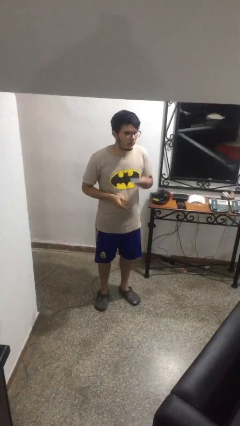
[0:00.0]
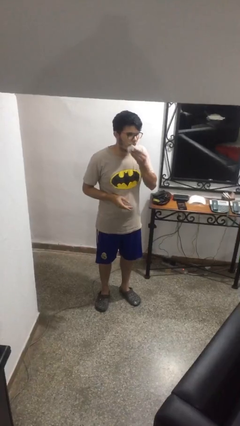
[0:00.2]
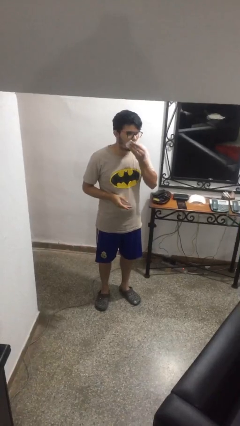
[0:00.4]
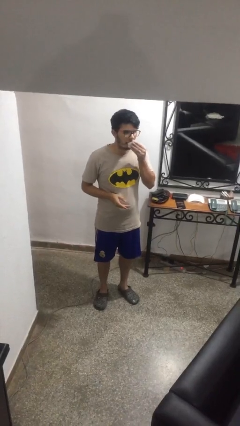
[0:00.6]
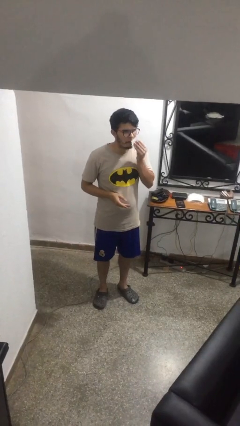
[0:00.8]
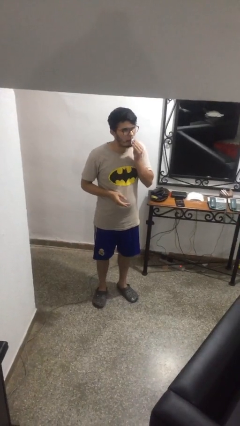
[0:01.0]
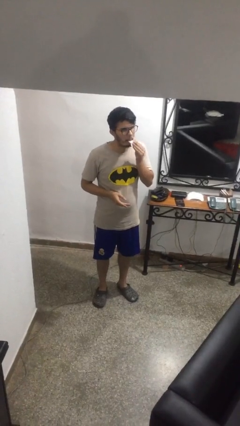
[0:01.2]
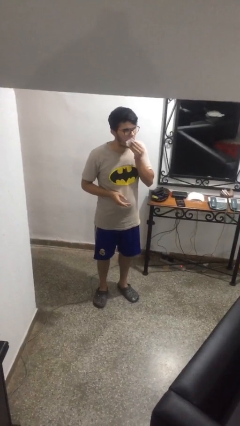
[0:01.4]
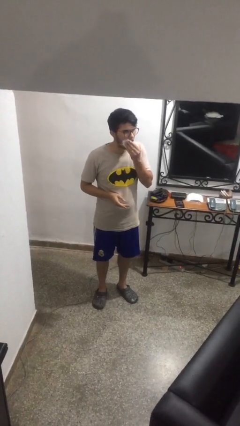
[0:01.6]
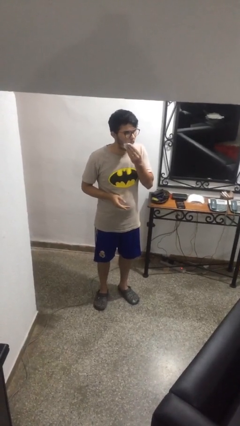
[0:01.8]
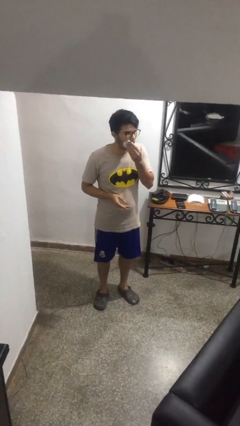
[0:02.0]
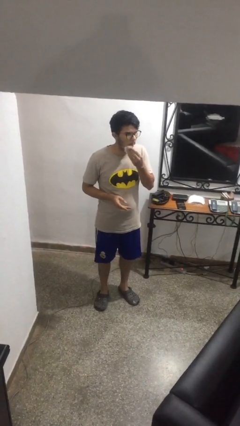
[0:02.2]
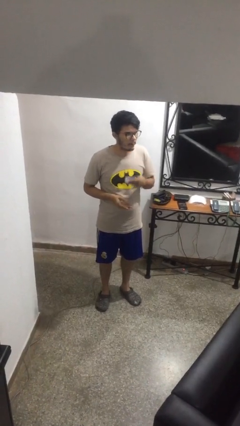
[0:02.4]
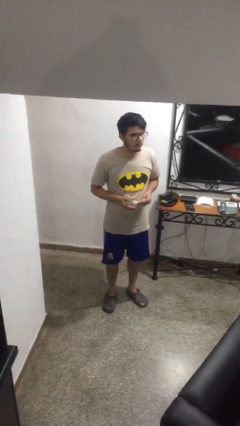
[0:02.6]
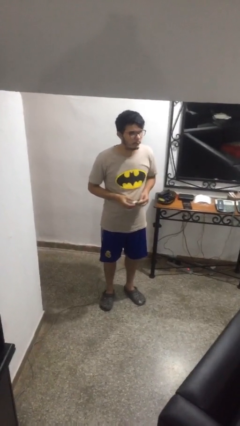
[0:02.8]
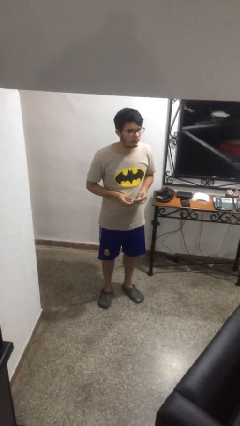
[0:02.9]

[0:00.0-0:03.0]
person wipes mouth with napkin

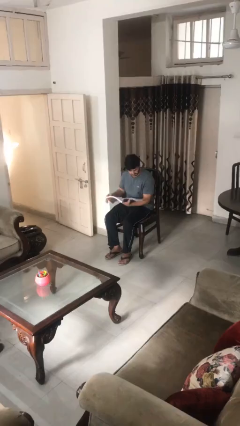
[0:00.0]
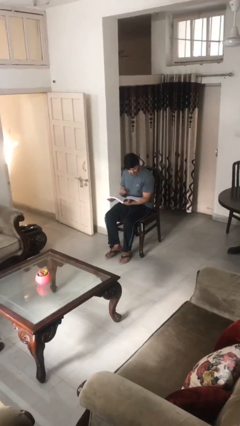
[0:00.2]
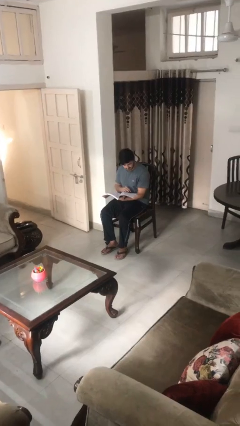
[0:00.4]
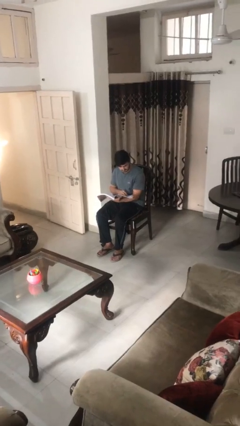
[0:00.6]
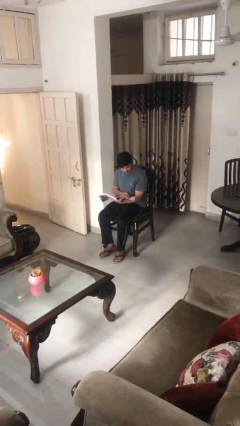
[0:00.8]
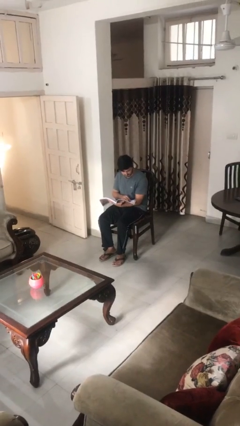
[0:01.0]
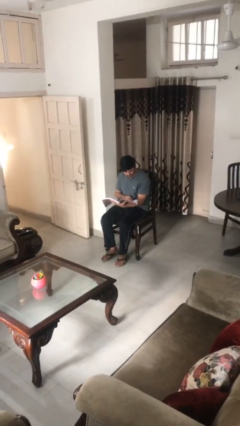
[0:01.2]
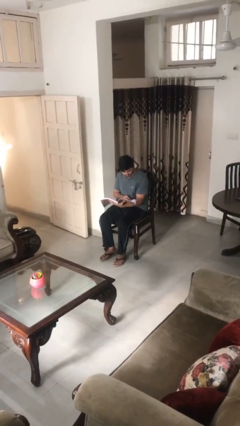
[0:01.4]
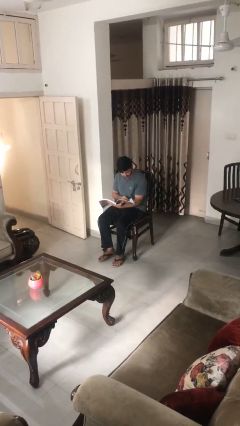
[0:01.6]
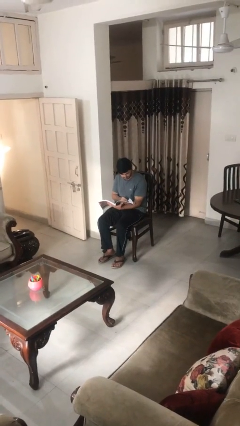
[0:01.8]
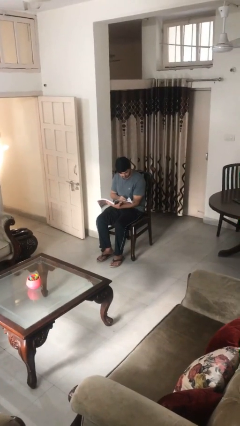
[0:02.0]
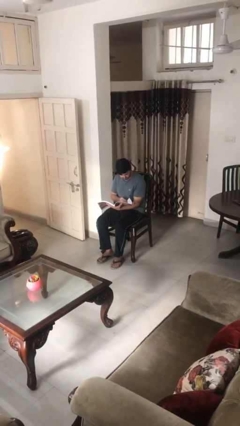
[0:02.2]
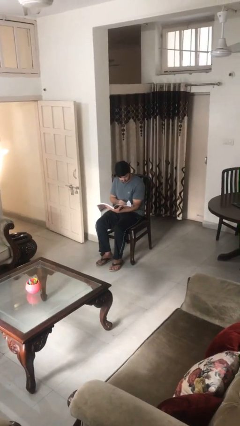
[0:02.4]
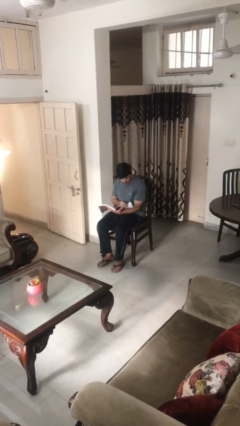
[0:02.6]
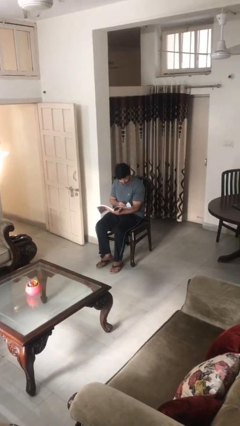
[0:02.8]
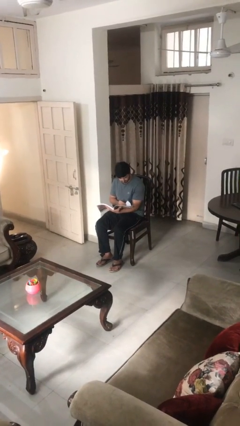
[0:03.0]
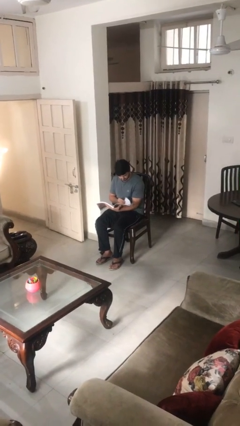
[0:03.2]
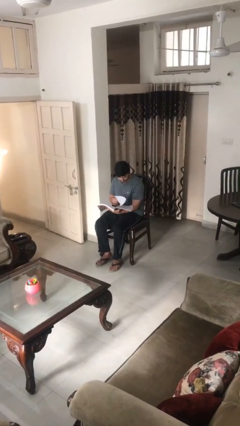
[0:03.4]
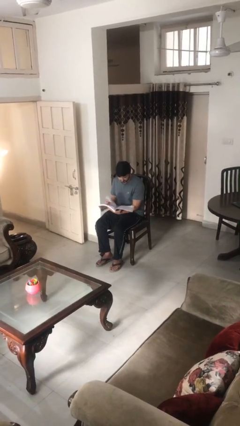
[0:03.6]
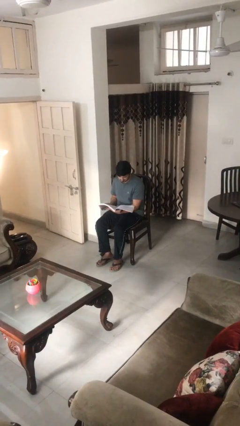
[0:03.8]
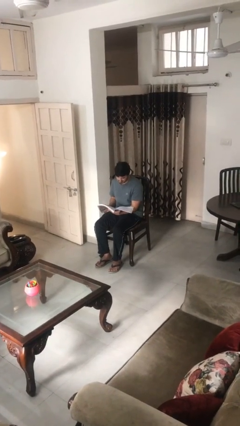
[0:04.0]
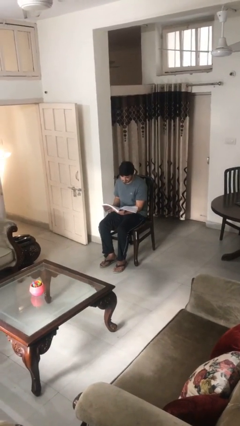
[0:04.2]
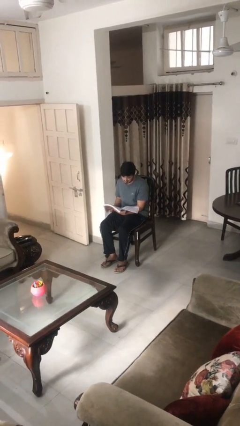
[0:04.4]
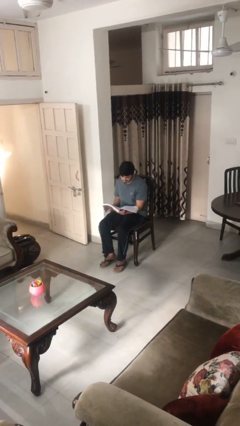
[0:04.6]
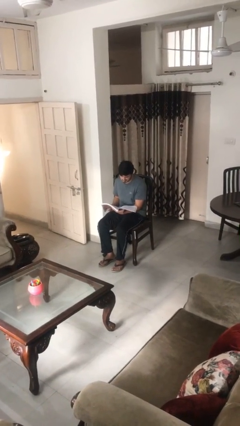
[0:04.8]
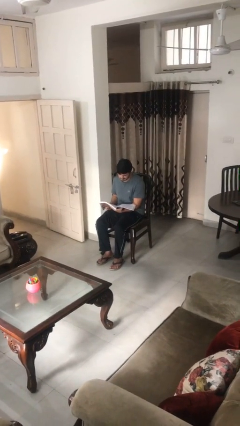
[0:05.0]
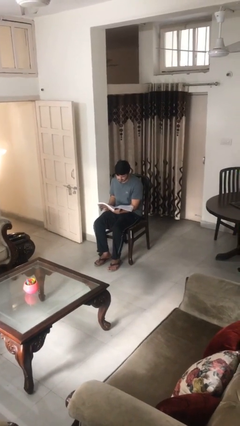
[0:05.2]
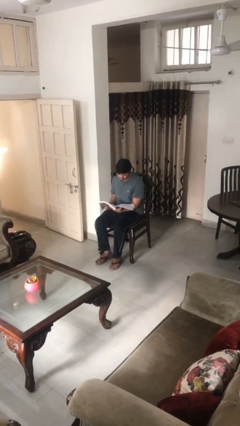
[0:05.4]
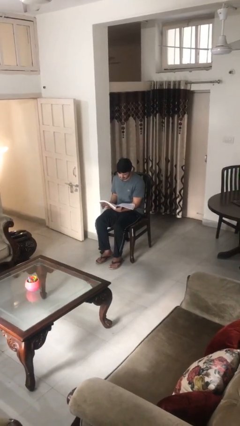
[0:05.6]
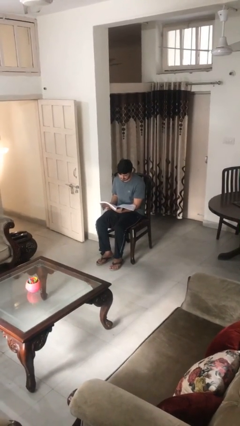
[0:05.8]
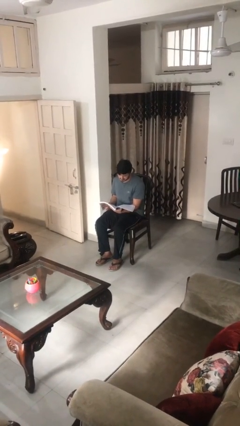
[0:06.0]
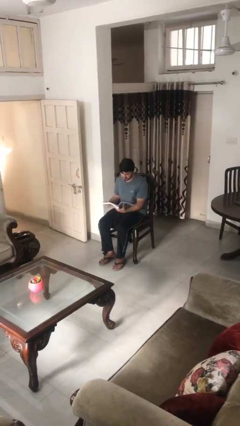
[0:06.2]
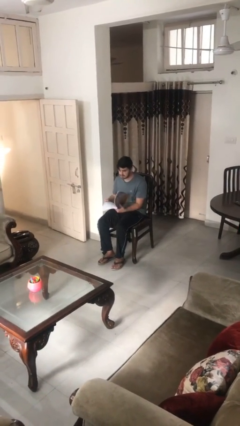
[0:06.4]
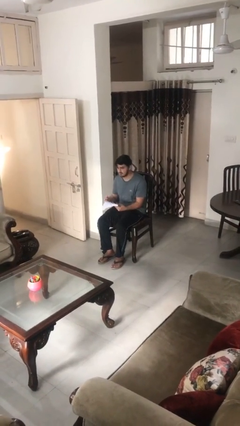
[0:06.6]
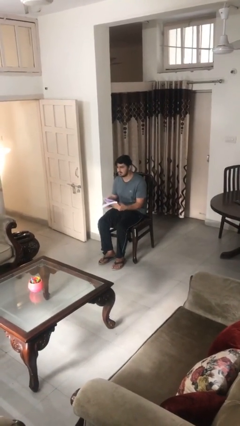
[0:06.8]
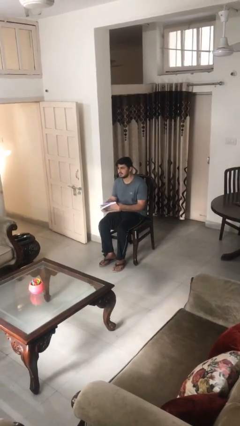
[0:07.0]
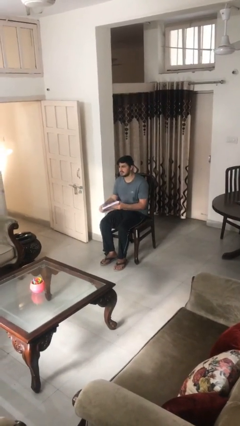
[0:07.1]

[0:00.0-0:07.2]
person reads document

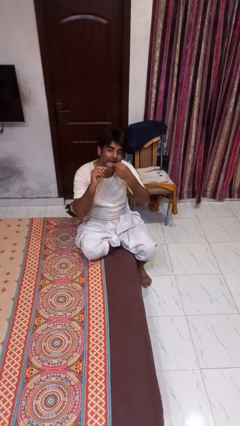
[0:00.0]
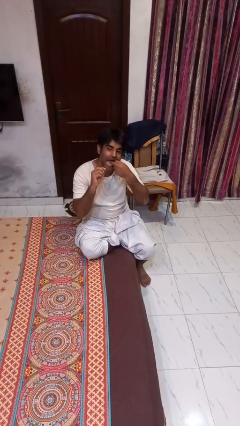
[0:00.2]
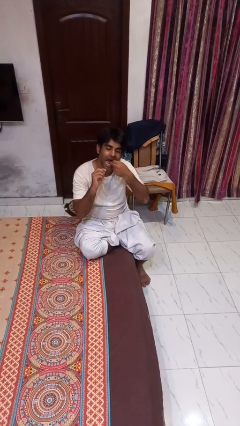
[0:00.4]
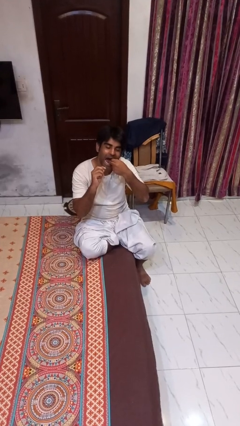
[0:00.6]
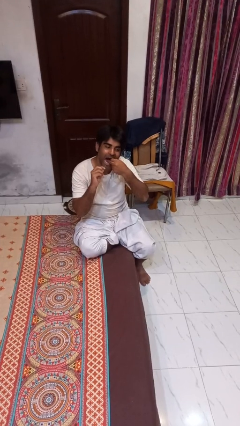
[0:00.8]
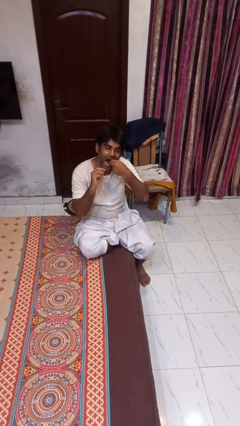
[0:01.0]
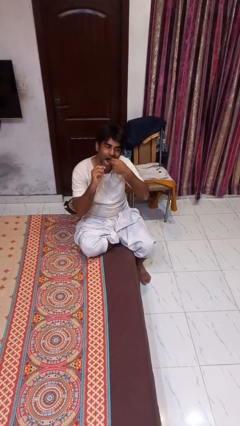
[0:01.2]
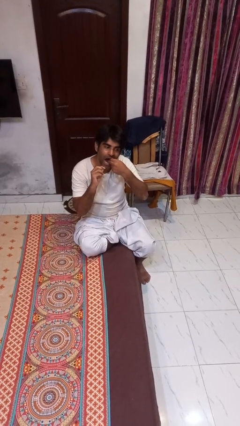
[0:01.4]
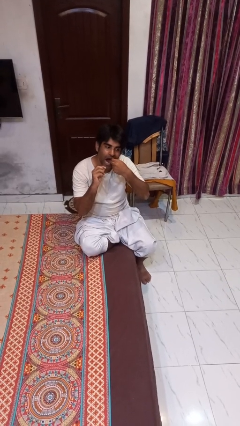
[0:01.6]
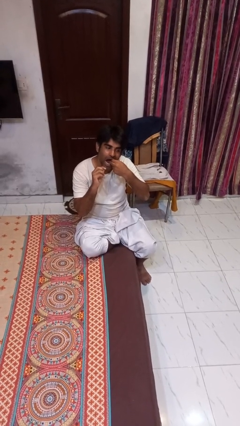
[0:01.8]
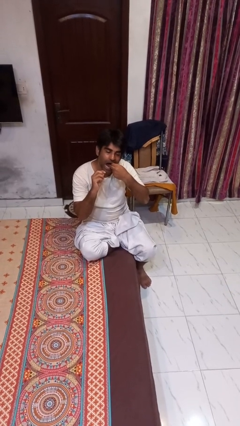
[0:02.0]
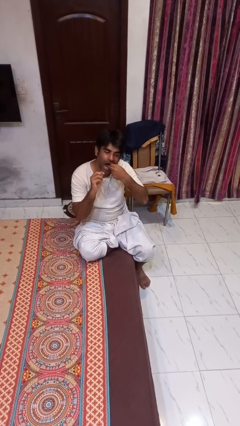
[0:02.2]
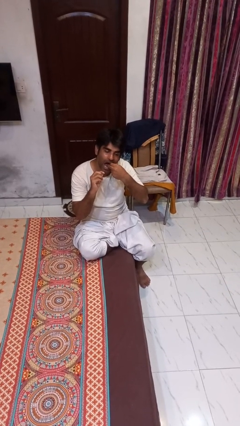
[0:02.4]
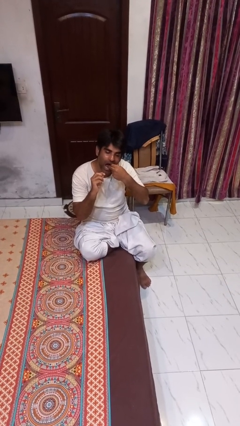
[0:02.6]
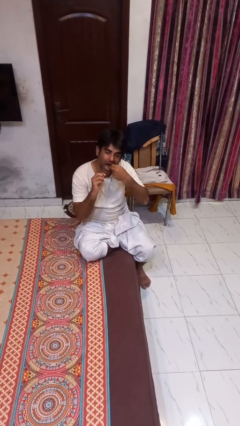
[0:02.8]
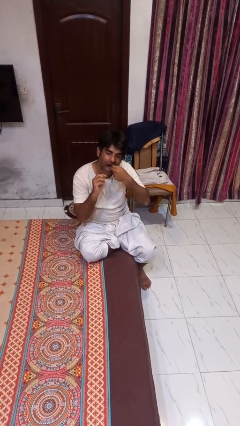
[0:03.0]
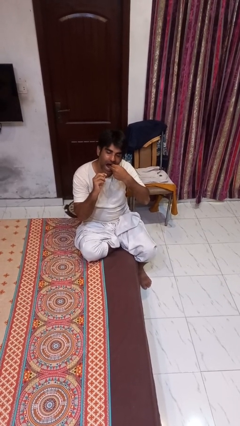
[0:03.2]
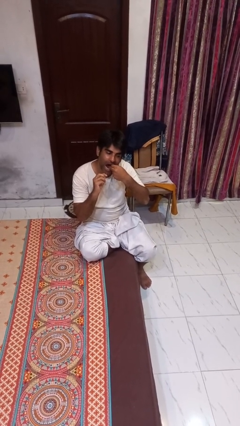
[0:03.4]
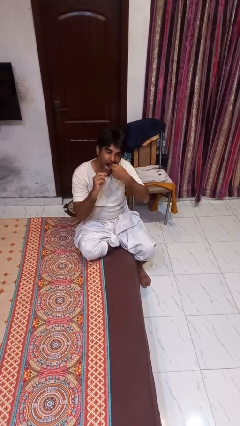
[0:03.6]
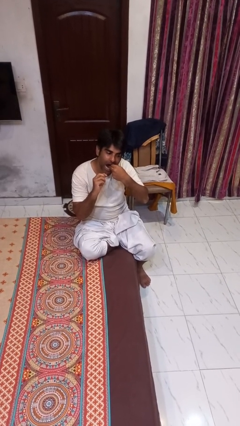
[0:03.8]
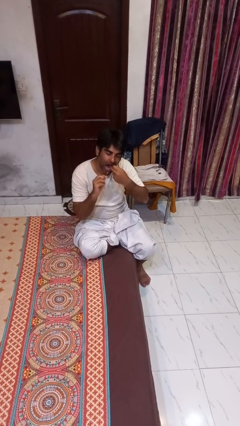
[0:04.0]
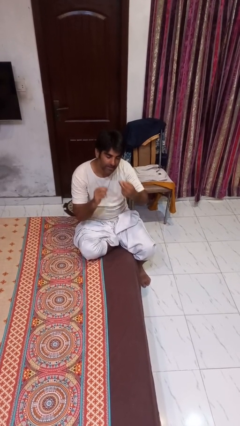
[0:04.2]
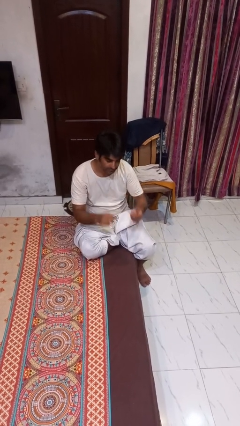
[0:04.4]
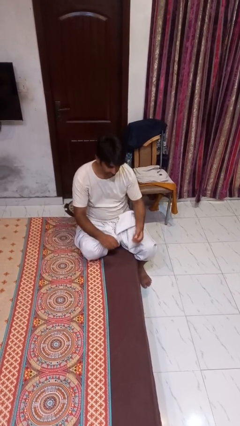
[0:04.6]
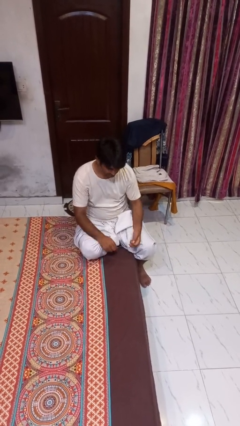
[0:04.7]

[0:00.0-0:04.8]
person flosses

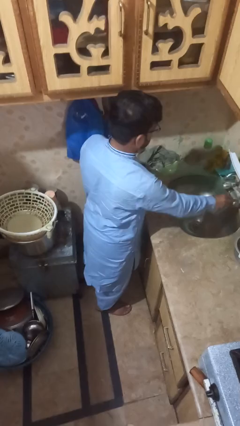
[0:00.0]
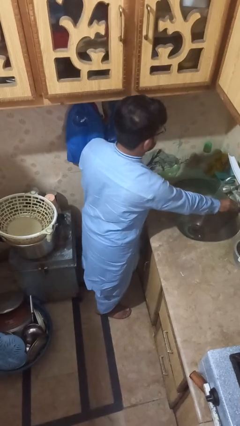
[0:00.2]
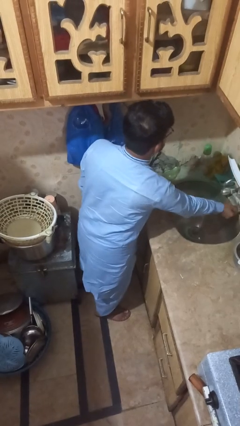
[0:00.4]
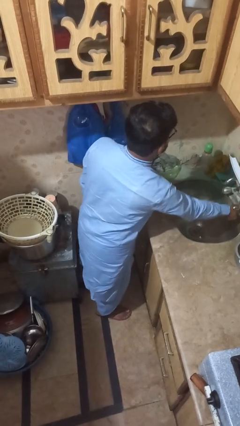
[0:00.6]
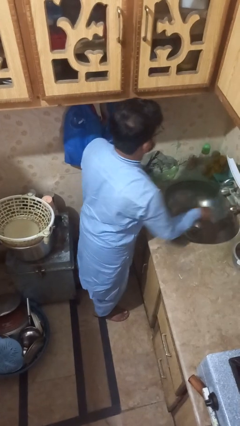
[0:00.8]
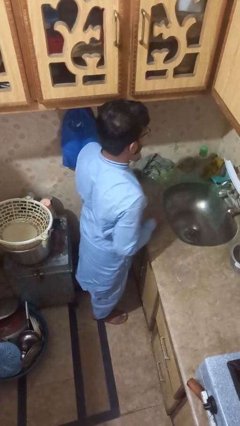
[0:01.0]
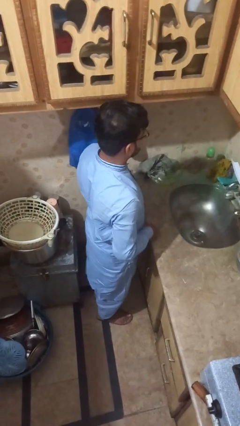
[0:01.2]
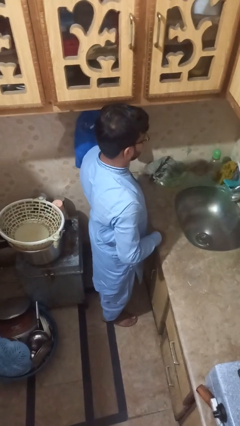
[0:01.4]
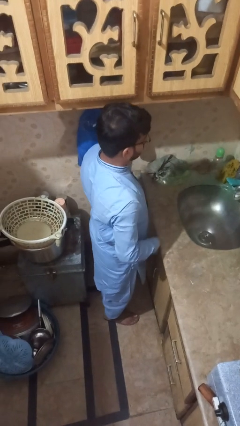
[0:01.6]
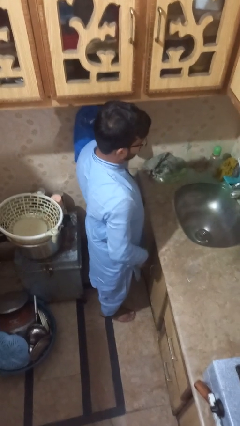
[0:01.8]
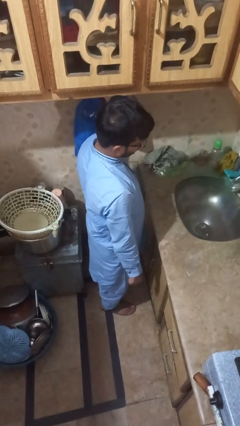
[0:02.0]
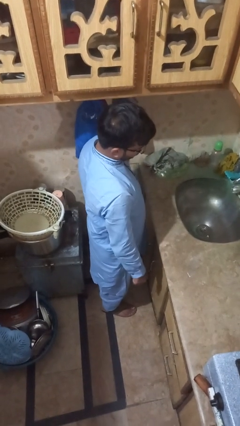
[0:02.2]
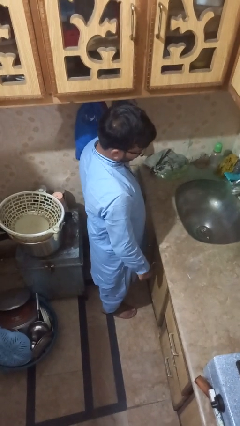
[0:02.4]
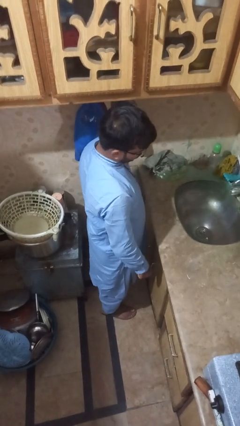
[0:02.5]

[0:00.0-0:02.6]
person turns off faucet

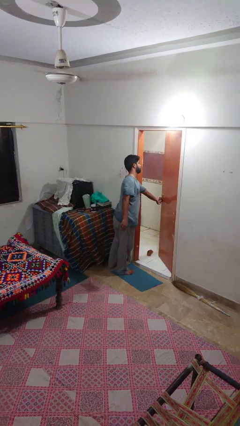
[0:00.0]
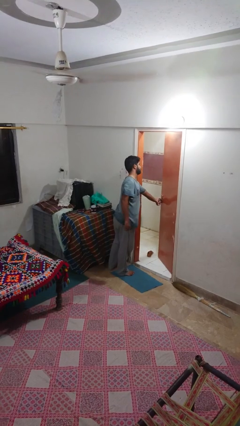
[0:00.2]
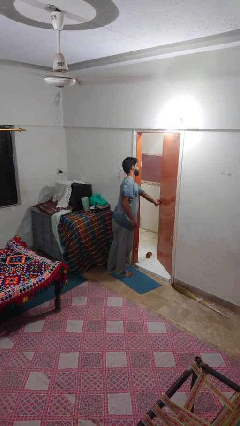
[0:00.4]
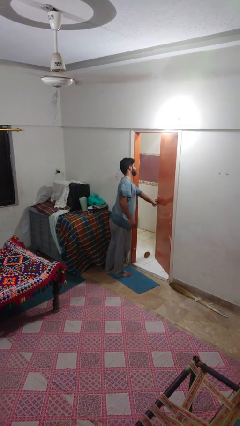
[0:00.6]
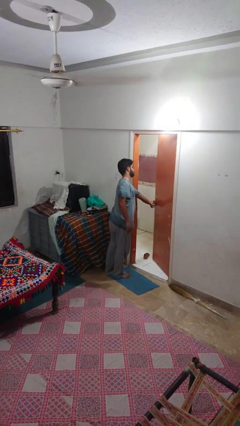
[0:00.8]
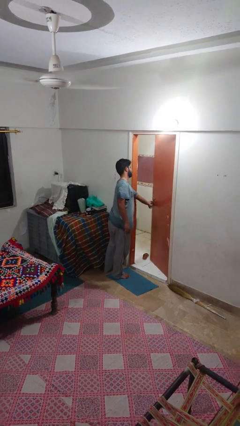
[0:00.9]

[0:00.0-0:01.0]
person opens facility door
